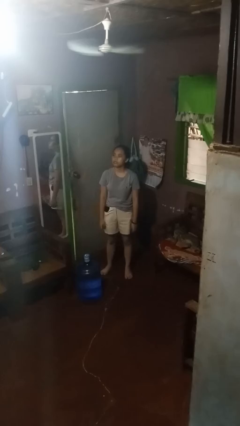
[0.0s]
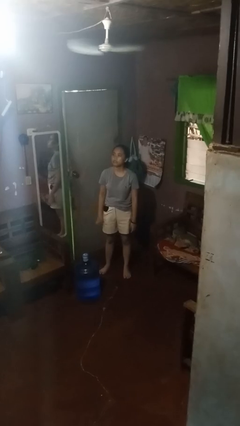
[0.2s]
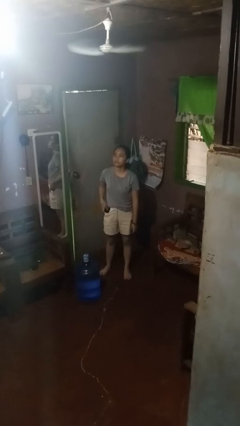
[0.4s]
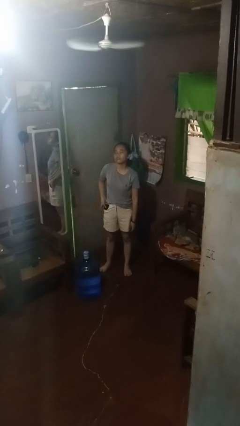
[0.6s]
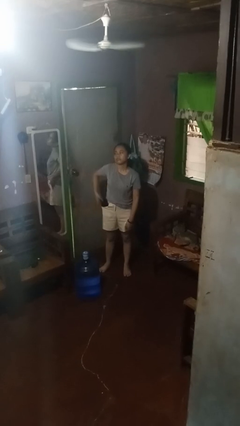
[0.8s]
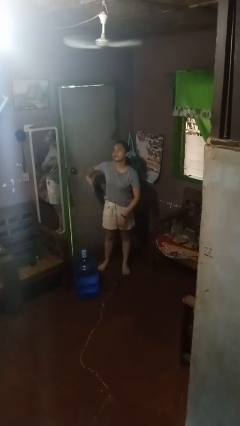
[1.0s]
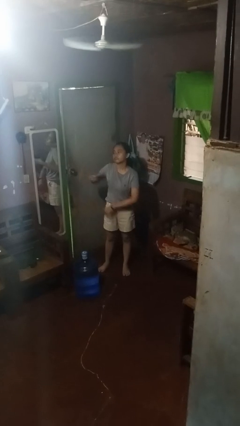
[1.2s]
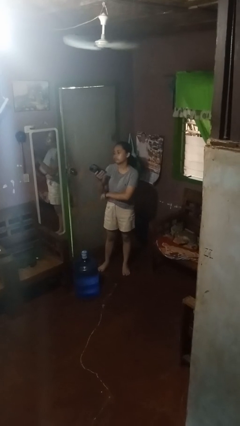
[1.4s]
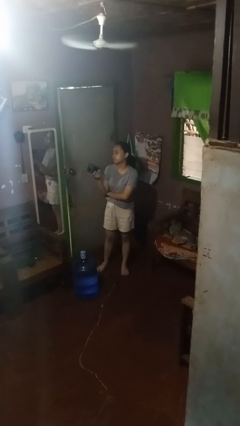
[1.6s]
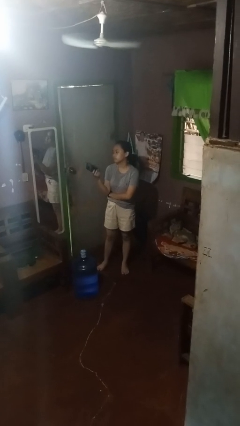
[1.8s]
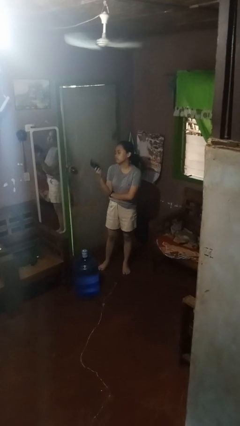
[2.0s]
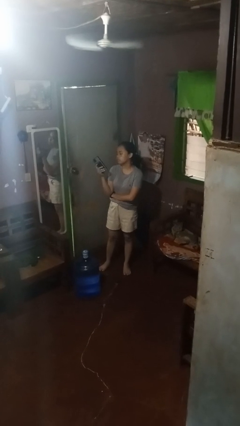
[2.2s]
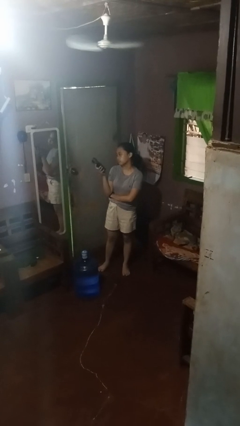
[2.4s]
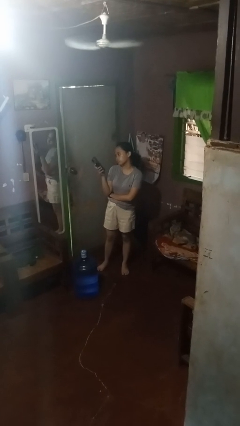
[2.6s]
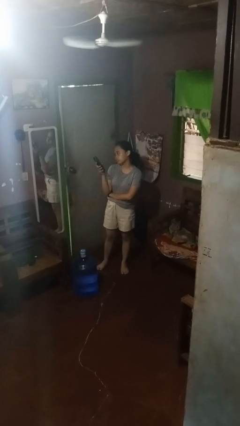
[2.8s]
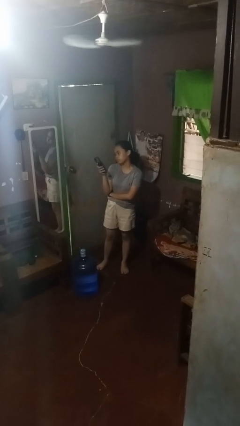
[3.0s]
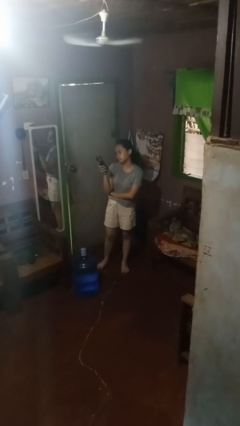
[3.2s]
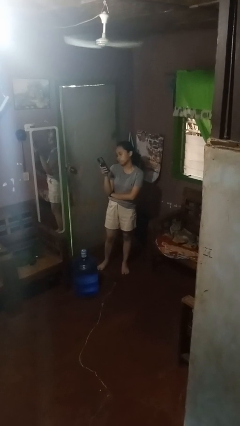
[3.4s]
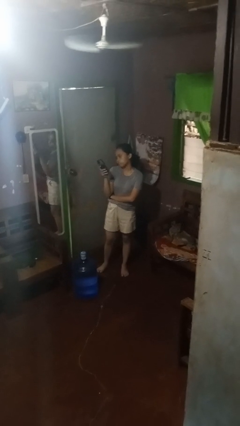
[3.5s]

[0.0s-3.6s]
person takes phone from pocket

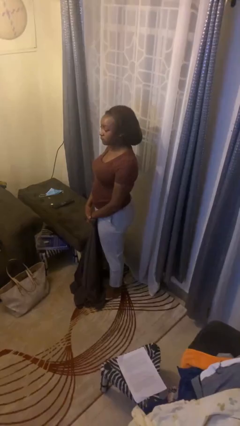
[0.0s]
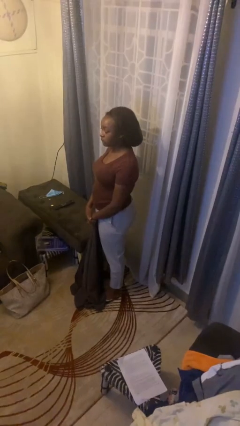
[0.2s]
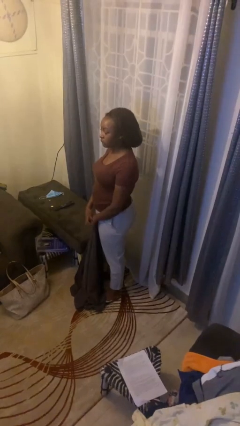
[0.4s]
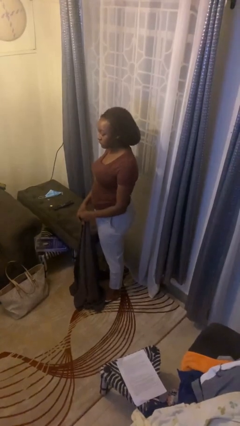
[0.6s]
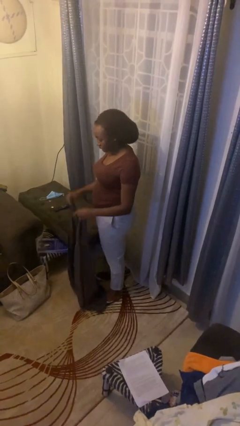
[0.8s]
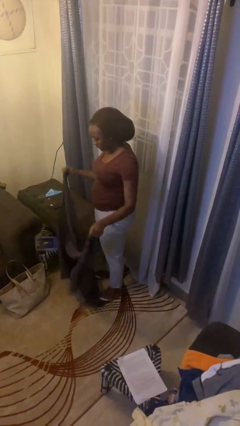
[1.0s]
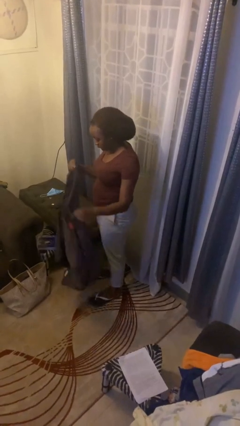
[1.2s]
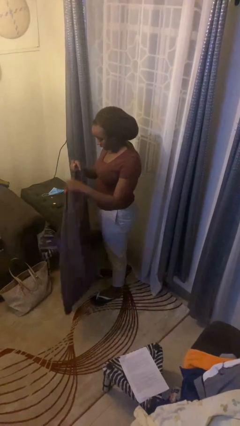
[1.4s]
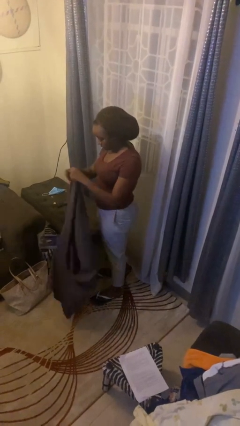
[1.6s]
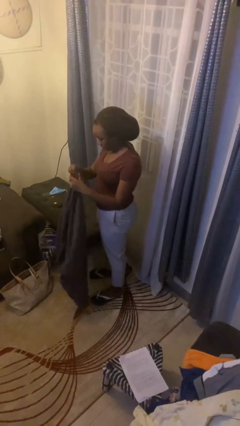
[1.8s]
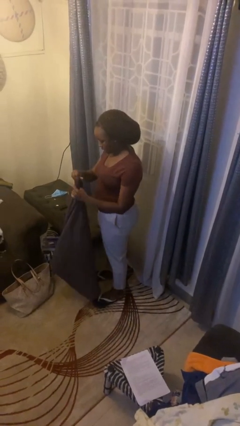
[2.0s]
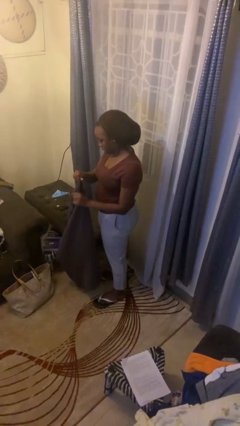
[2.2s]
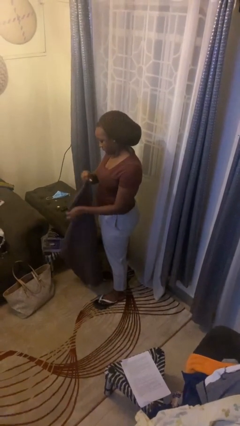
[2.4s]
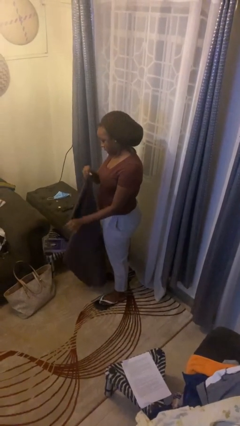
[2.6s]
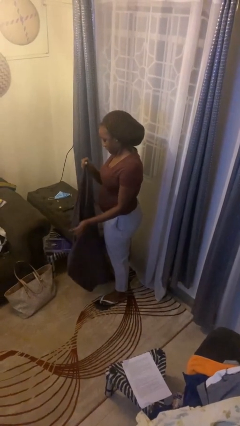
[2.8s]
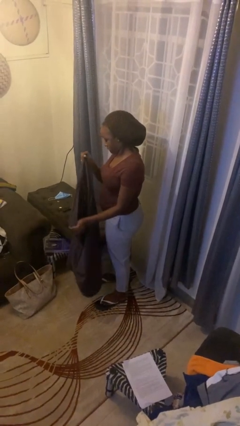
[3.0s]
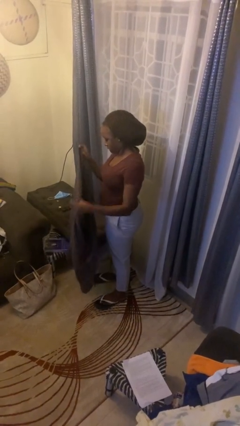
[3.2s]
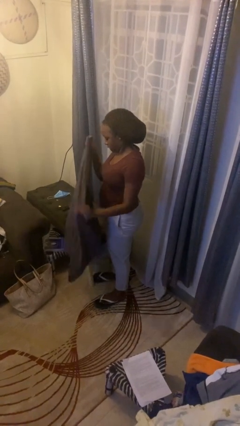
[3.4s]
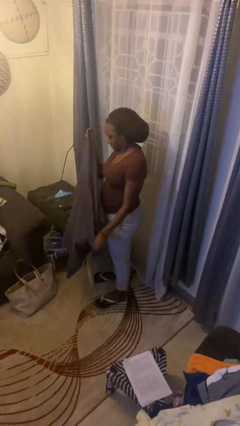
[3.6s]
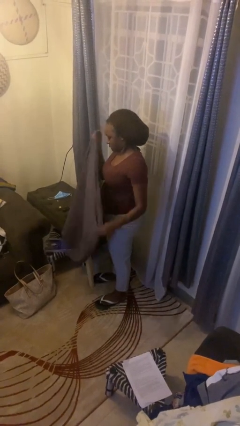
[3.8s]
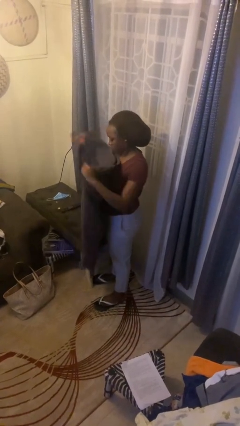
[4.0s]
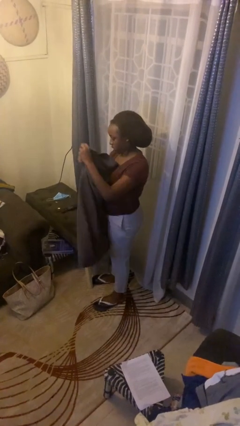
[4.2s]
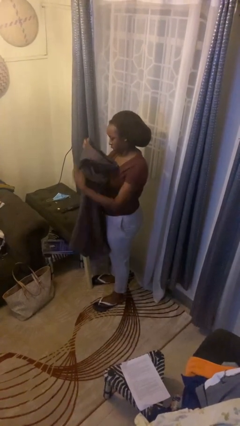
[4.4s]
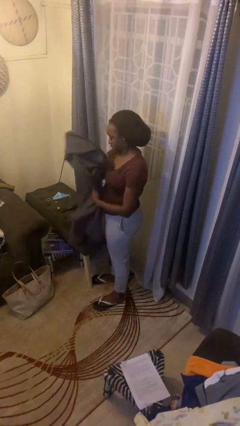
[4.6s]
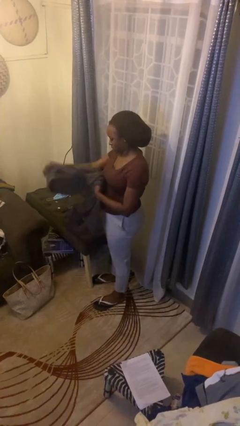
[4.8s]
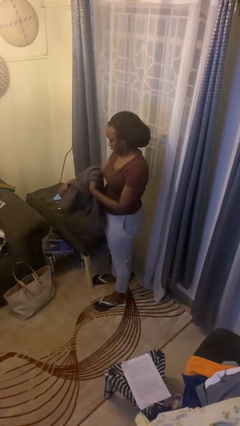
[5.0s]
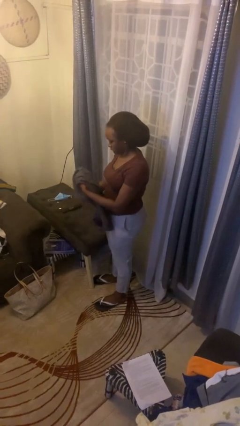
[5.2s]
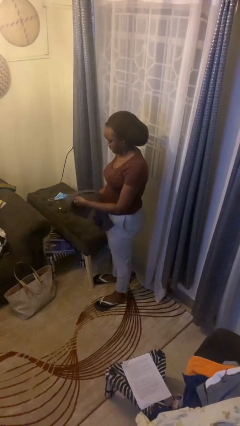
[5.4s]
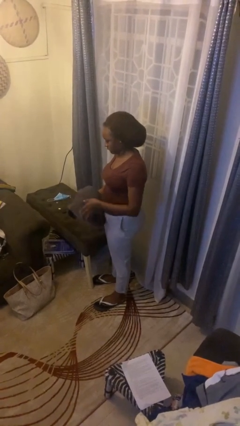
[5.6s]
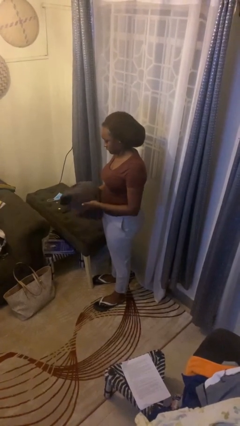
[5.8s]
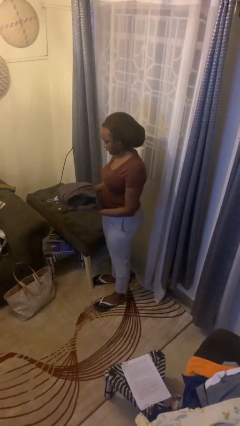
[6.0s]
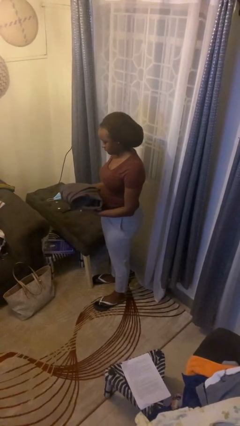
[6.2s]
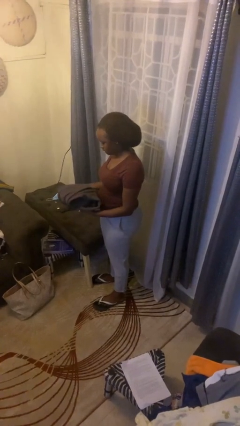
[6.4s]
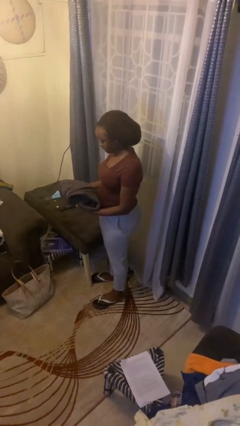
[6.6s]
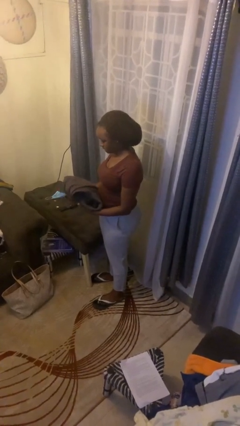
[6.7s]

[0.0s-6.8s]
person folds blanket

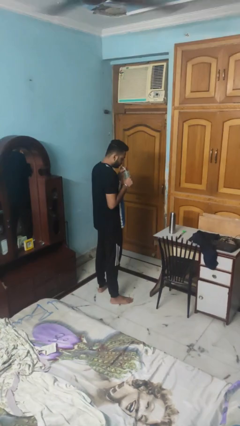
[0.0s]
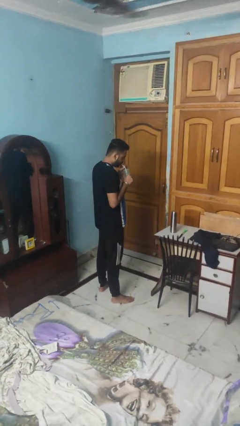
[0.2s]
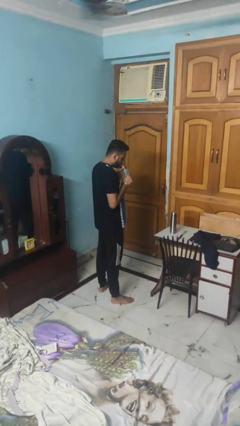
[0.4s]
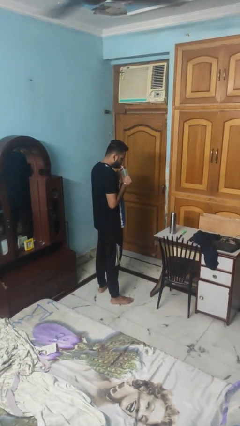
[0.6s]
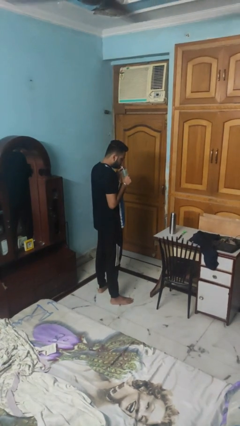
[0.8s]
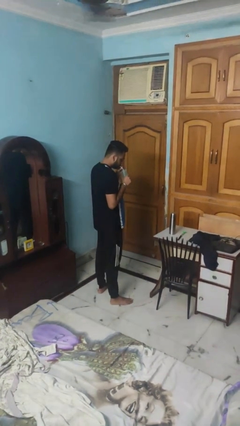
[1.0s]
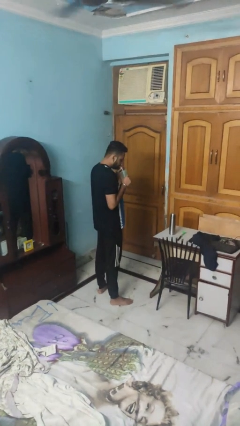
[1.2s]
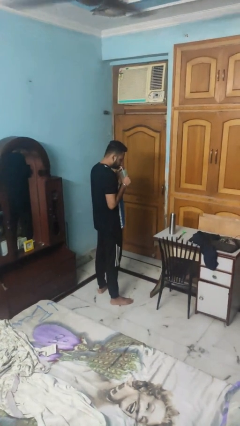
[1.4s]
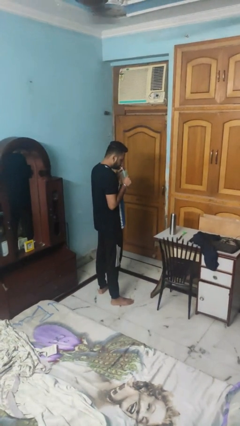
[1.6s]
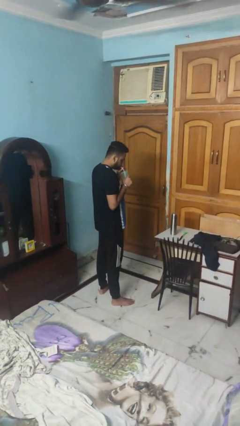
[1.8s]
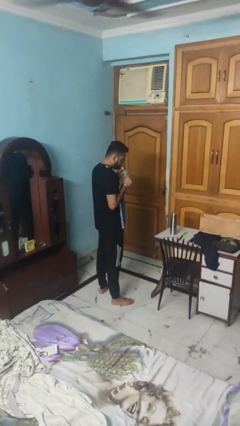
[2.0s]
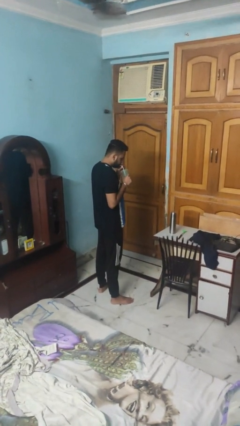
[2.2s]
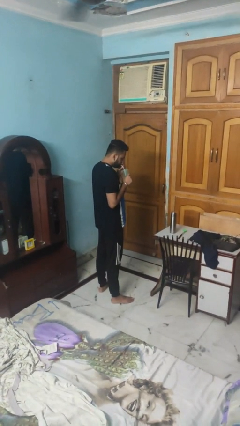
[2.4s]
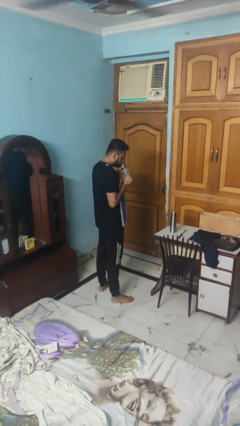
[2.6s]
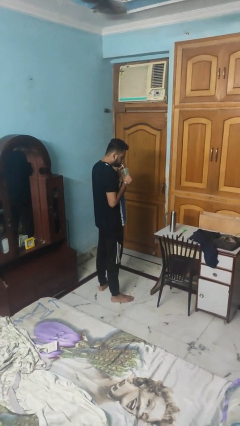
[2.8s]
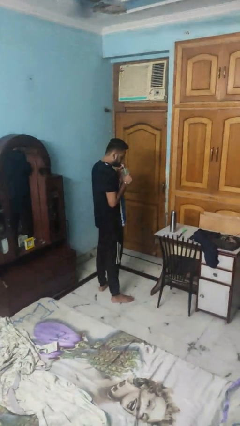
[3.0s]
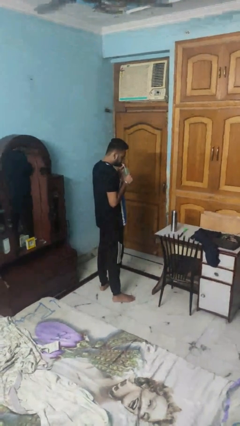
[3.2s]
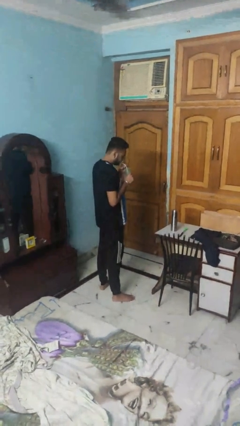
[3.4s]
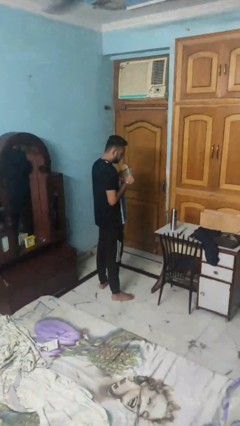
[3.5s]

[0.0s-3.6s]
person drinks from straw

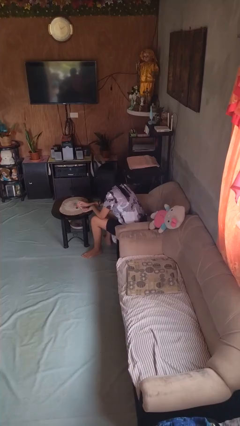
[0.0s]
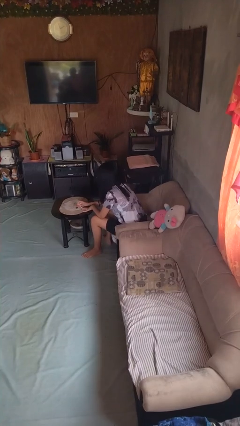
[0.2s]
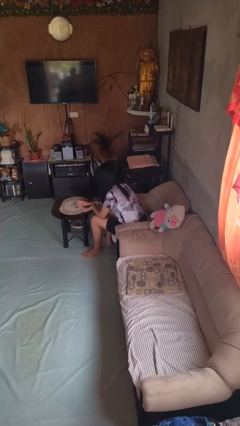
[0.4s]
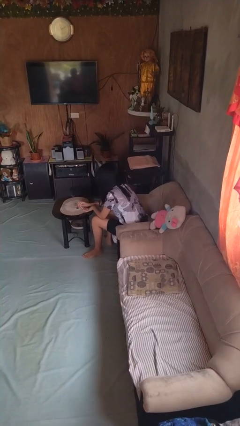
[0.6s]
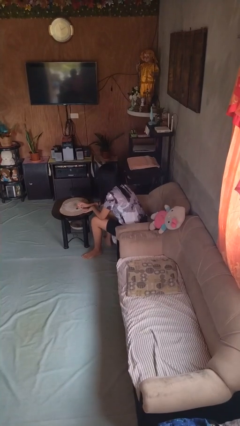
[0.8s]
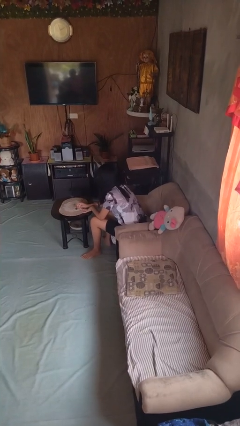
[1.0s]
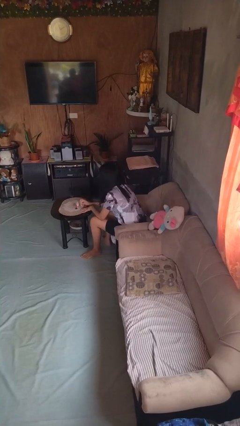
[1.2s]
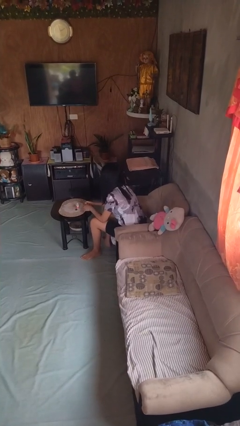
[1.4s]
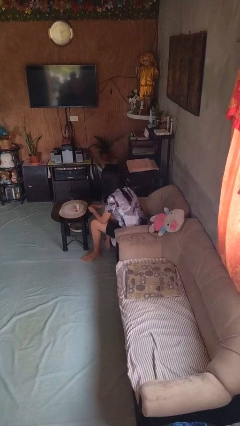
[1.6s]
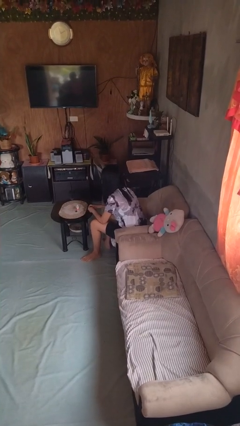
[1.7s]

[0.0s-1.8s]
person paints fingernails

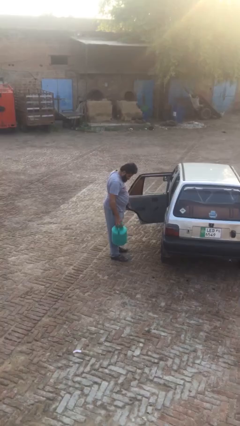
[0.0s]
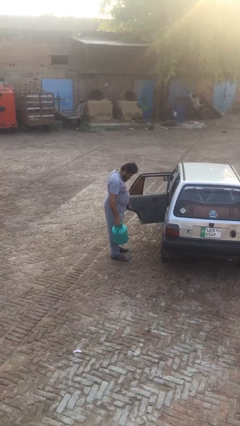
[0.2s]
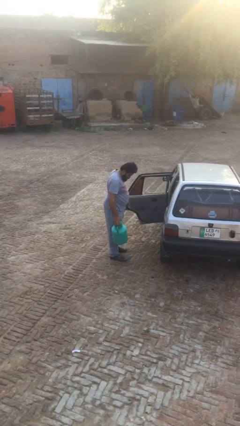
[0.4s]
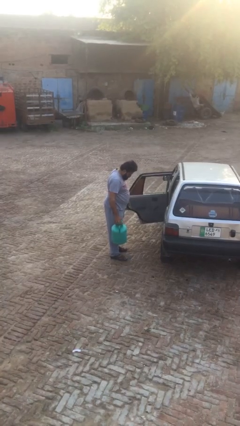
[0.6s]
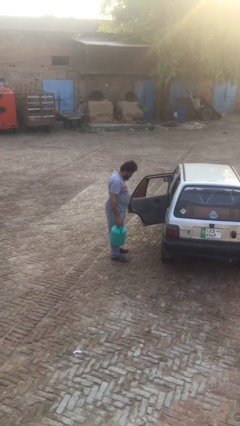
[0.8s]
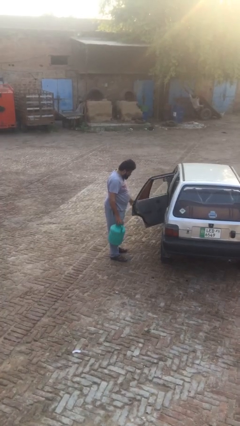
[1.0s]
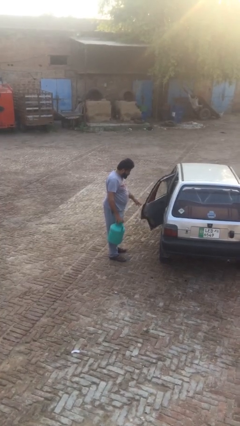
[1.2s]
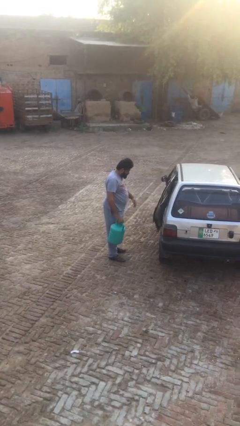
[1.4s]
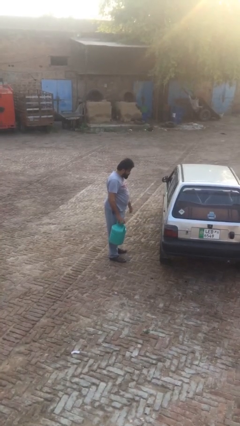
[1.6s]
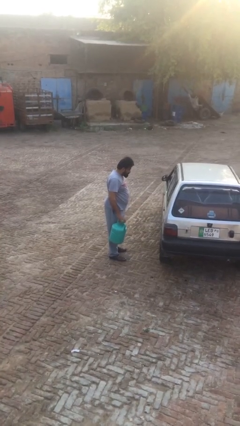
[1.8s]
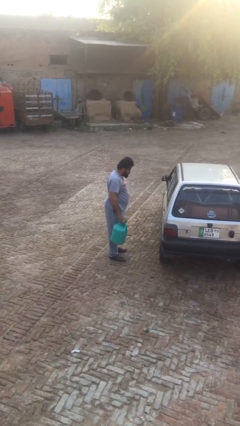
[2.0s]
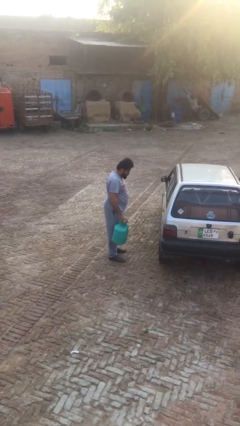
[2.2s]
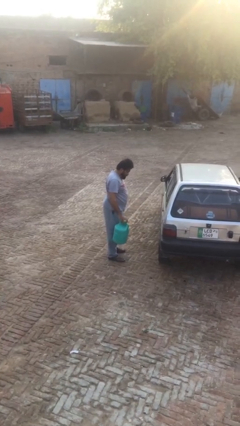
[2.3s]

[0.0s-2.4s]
person closes car door
